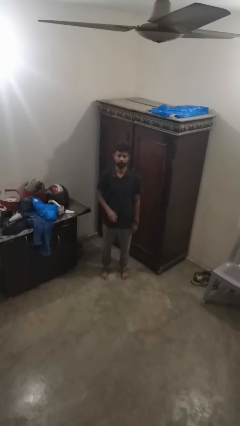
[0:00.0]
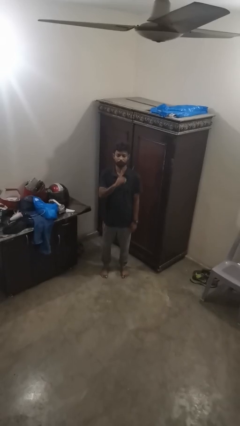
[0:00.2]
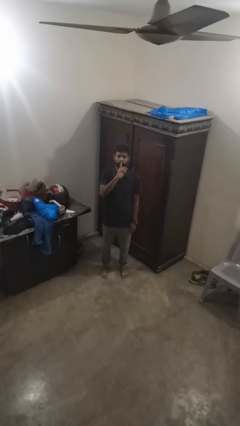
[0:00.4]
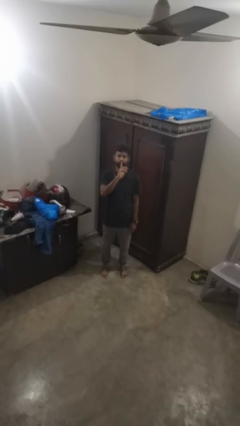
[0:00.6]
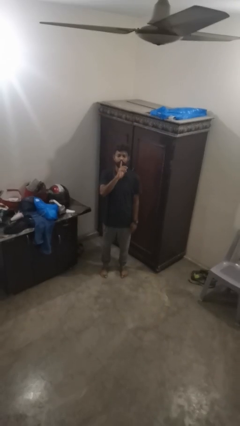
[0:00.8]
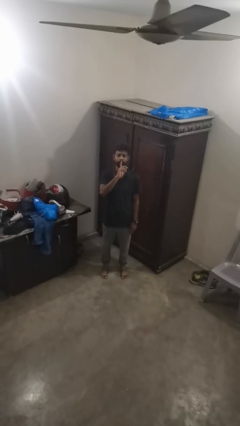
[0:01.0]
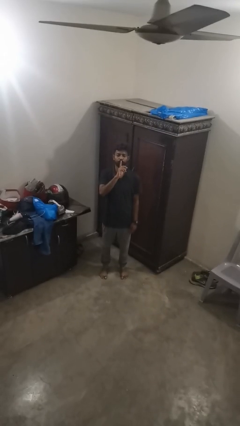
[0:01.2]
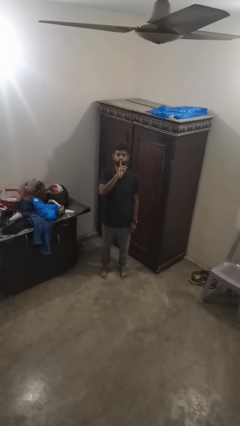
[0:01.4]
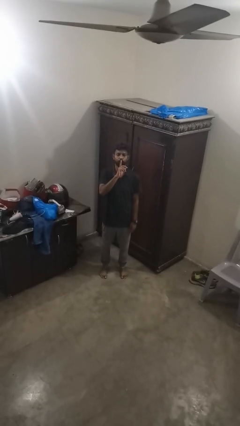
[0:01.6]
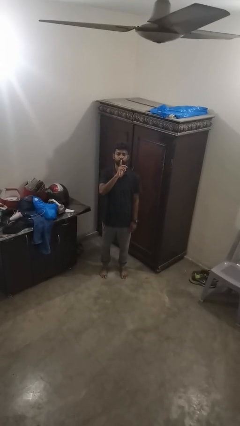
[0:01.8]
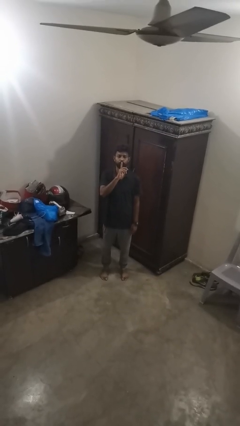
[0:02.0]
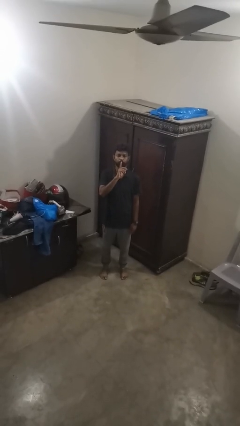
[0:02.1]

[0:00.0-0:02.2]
person gestures be quiet

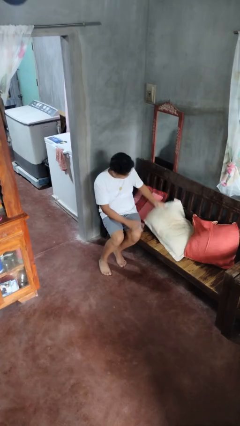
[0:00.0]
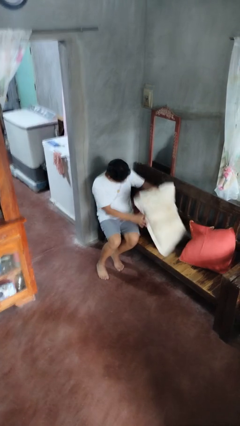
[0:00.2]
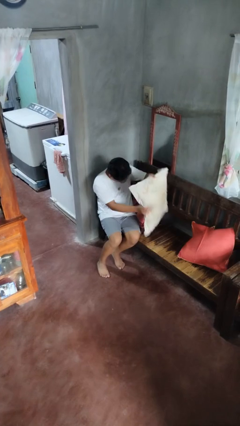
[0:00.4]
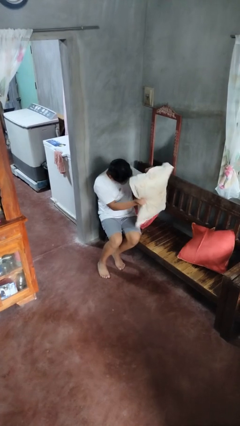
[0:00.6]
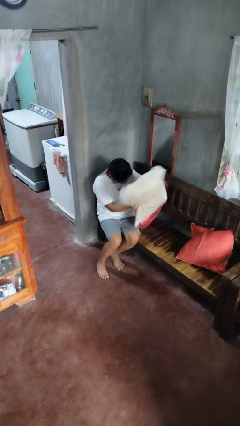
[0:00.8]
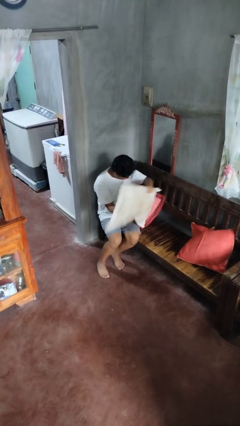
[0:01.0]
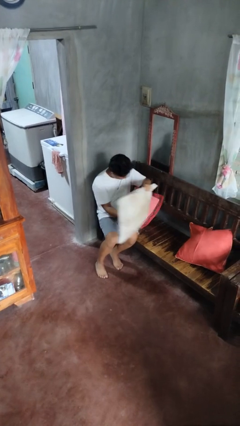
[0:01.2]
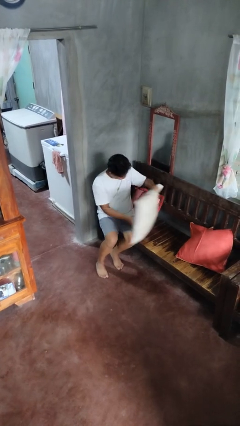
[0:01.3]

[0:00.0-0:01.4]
person searches in couch

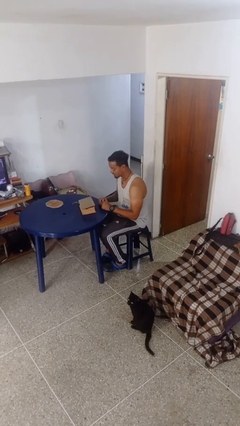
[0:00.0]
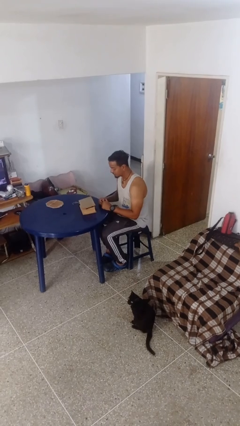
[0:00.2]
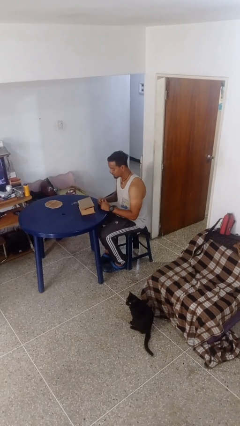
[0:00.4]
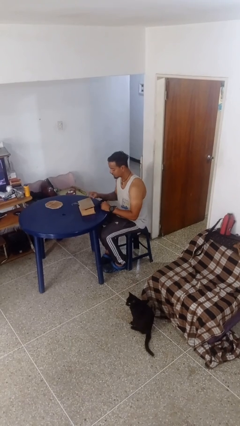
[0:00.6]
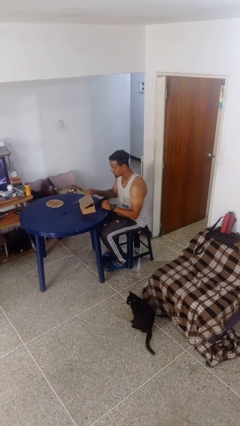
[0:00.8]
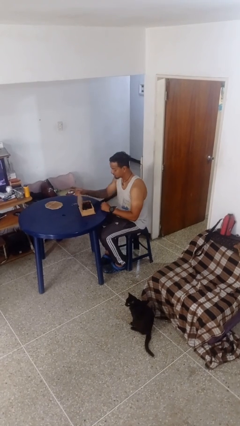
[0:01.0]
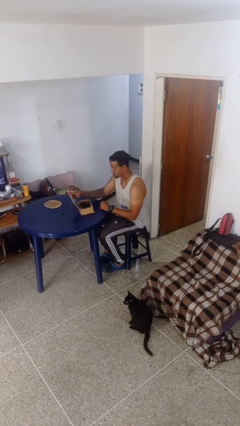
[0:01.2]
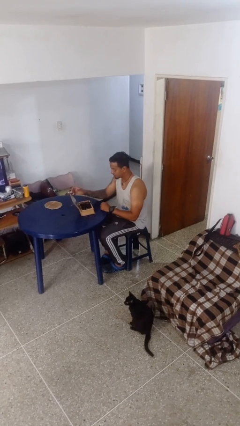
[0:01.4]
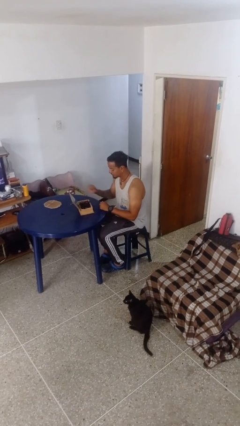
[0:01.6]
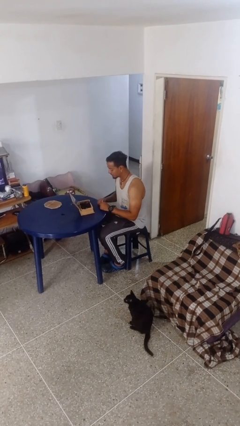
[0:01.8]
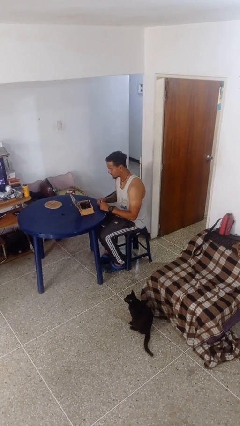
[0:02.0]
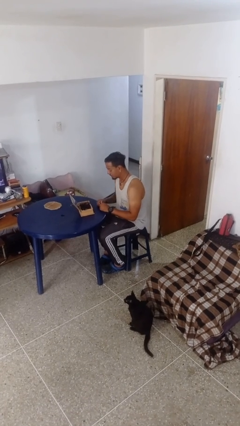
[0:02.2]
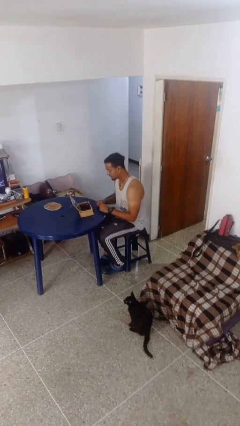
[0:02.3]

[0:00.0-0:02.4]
person opens jewelry box

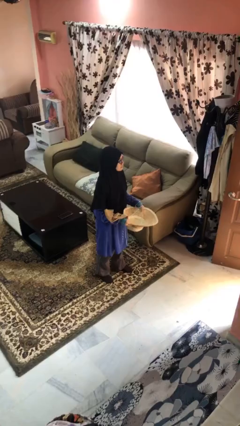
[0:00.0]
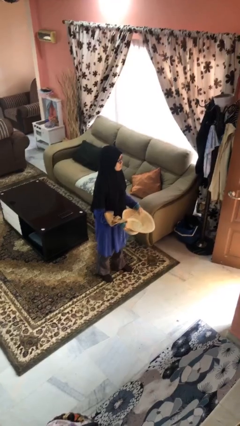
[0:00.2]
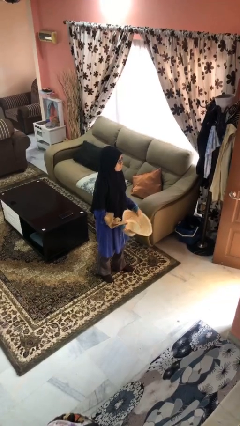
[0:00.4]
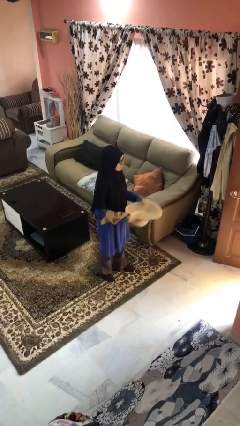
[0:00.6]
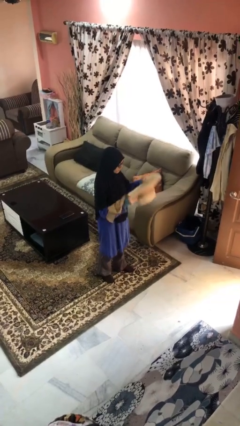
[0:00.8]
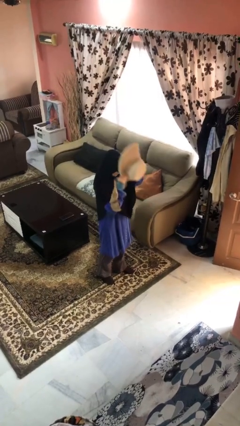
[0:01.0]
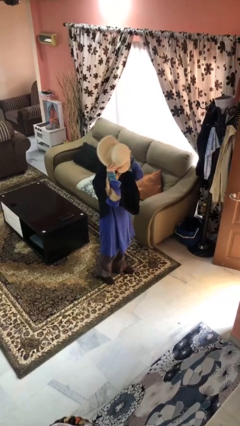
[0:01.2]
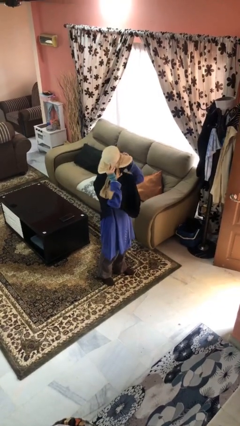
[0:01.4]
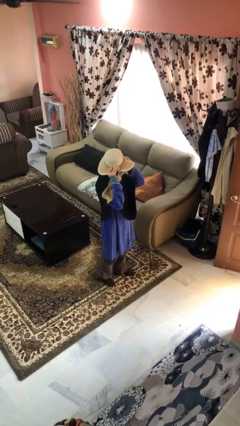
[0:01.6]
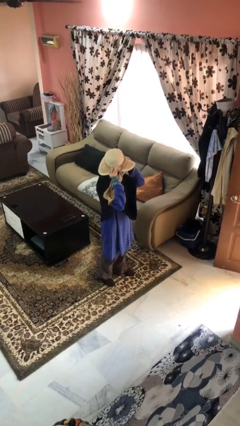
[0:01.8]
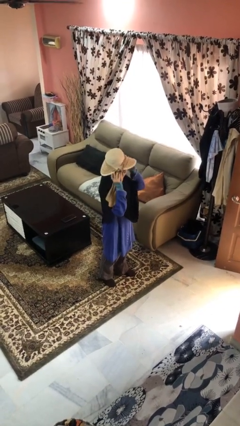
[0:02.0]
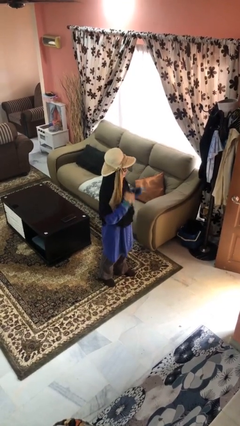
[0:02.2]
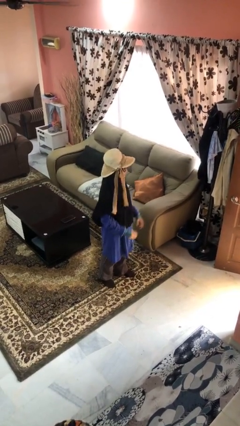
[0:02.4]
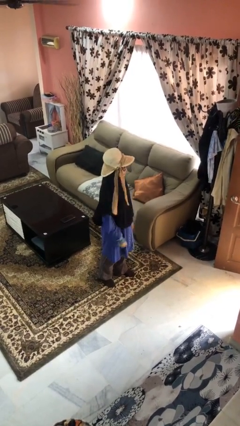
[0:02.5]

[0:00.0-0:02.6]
person puts on hat

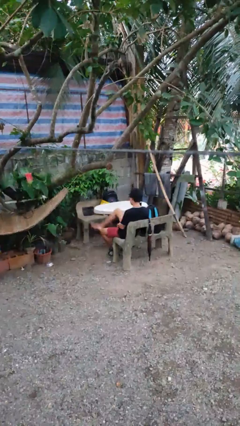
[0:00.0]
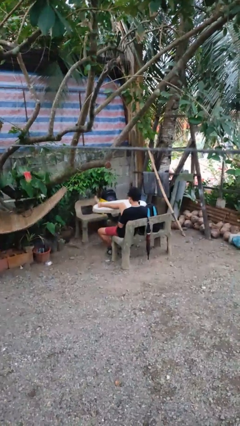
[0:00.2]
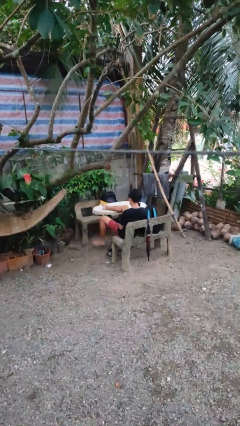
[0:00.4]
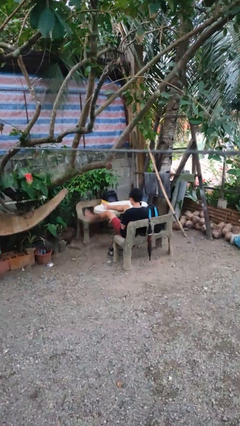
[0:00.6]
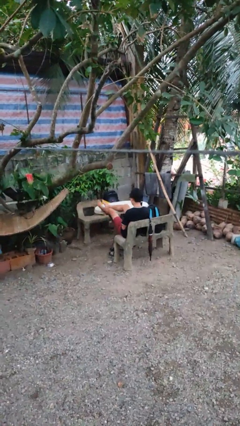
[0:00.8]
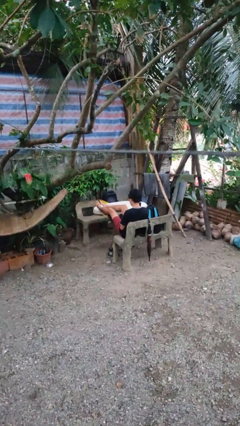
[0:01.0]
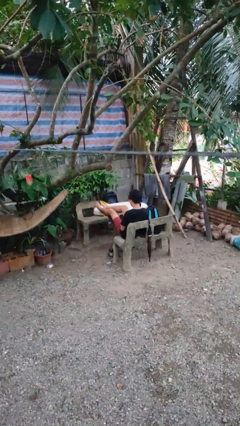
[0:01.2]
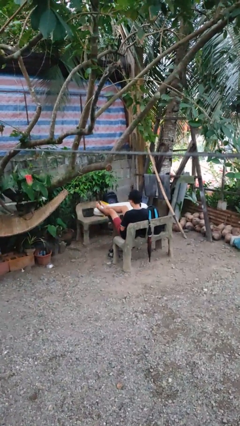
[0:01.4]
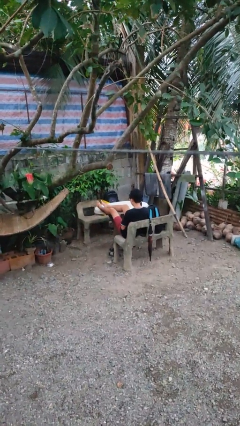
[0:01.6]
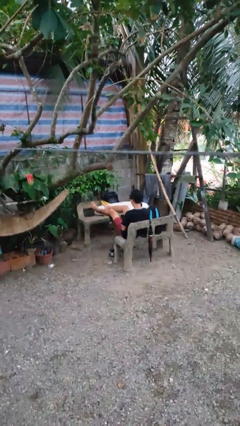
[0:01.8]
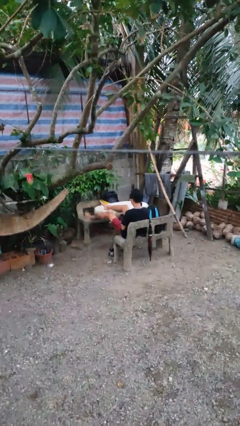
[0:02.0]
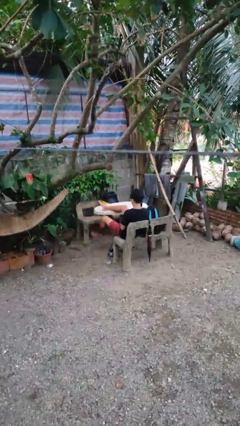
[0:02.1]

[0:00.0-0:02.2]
person puts feet up

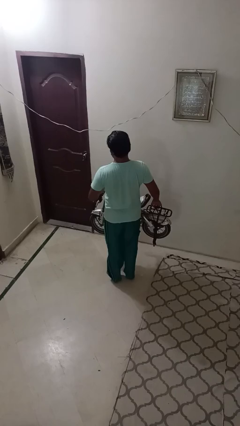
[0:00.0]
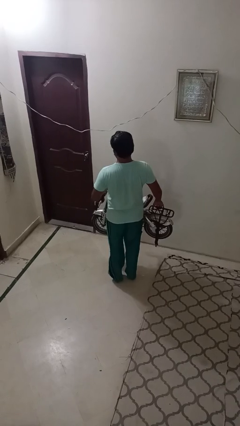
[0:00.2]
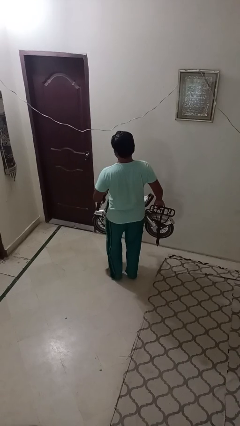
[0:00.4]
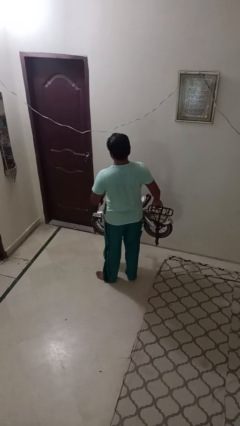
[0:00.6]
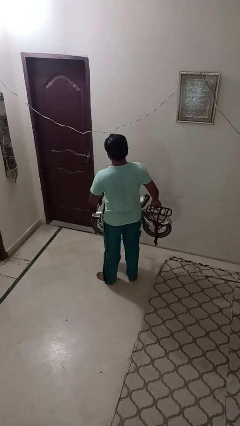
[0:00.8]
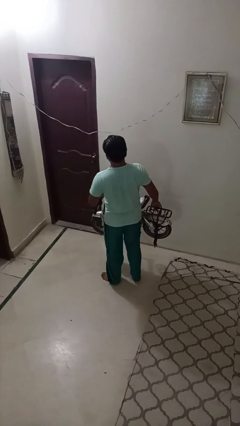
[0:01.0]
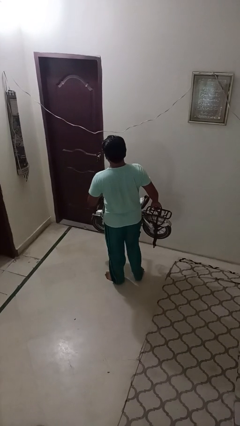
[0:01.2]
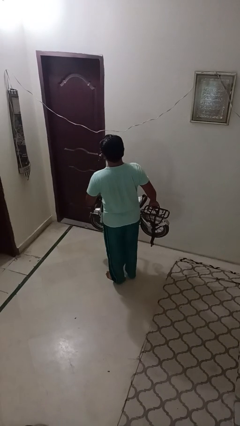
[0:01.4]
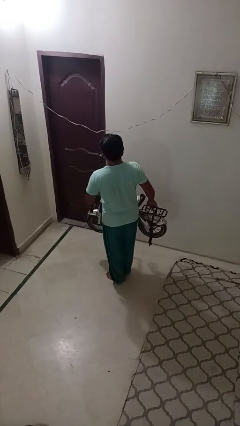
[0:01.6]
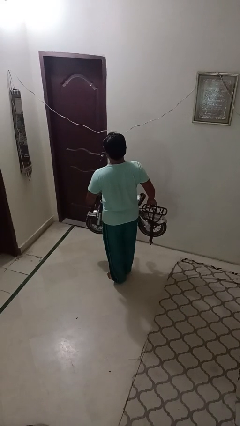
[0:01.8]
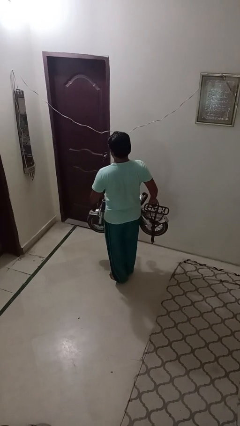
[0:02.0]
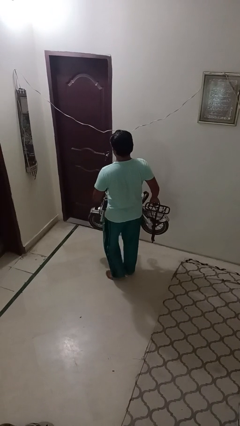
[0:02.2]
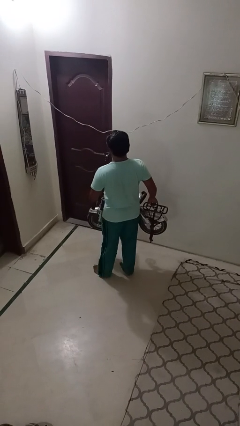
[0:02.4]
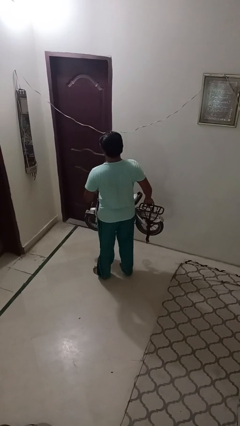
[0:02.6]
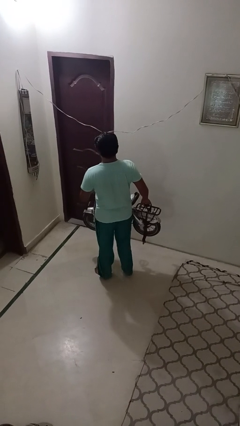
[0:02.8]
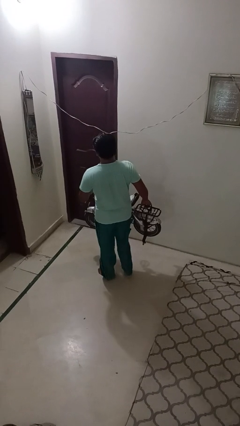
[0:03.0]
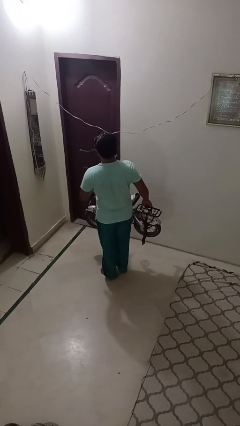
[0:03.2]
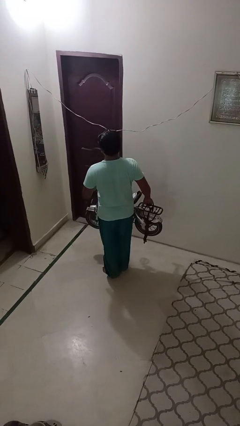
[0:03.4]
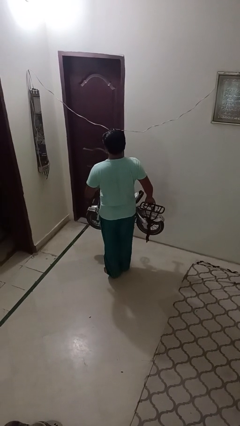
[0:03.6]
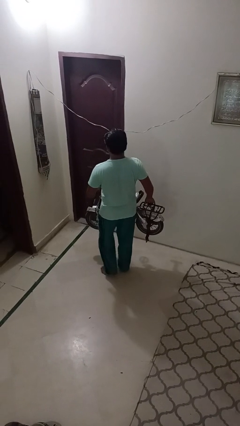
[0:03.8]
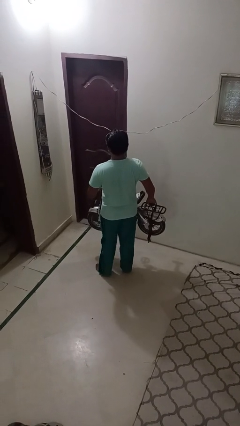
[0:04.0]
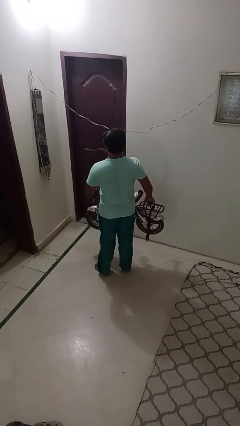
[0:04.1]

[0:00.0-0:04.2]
person carries bicycle

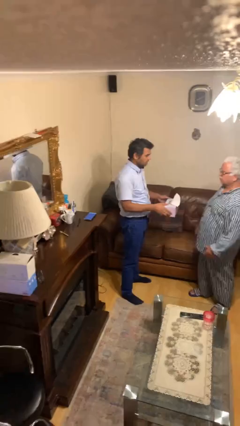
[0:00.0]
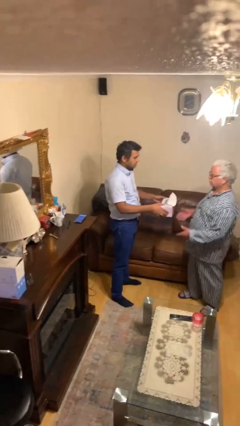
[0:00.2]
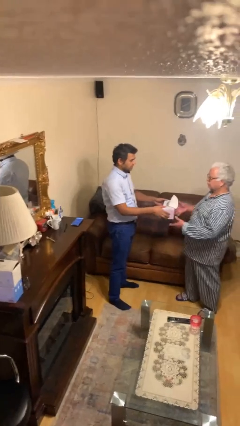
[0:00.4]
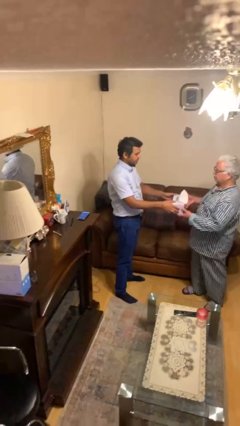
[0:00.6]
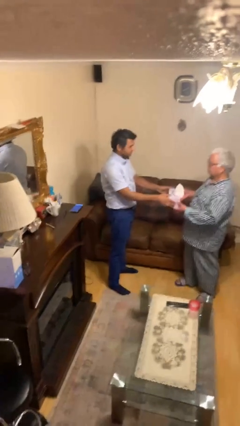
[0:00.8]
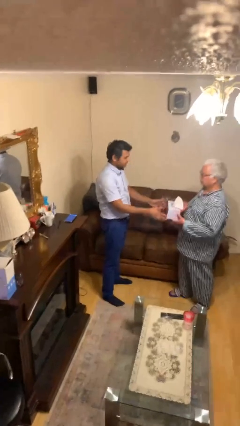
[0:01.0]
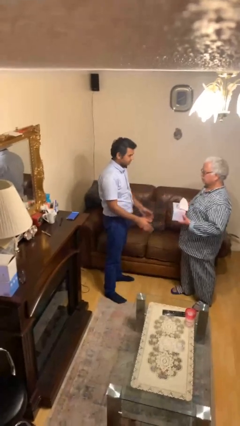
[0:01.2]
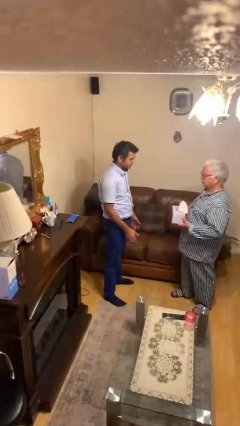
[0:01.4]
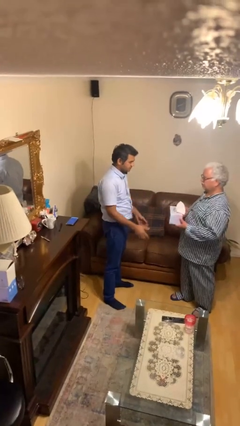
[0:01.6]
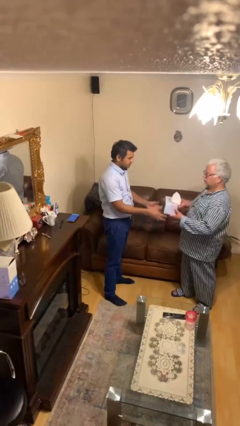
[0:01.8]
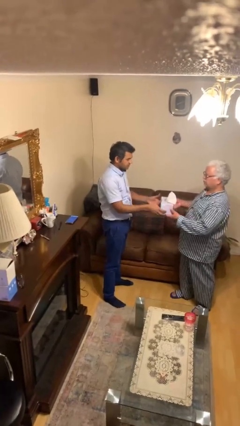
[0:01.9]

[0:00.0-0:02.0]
person transfers object to person
